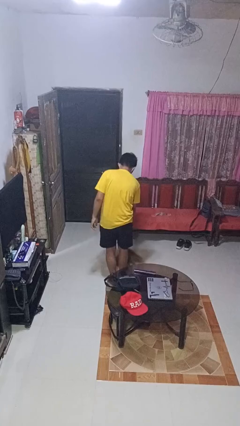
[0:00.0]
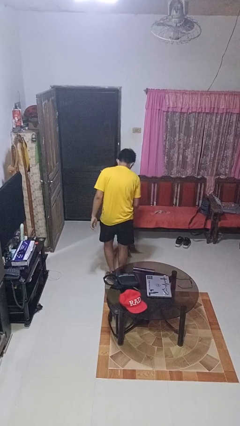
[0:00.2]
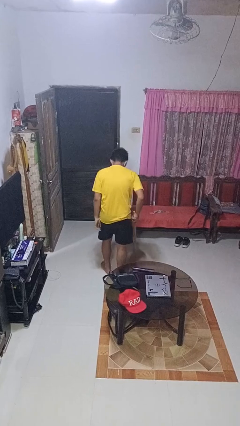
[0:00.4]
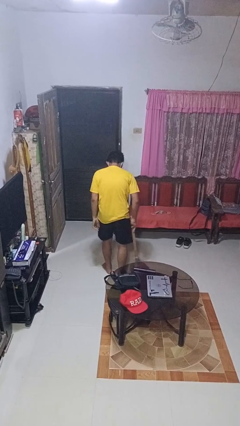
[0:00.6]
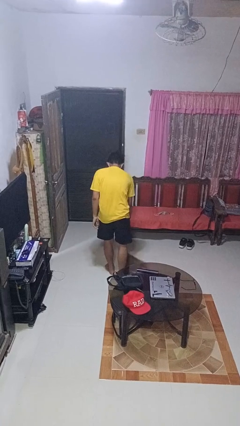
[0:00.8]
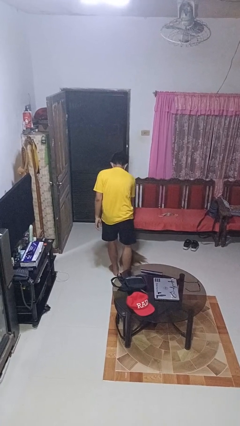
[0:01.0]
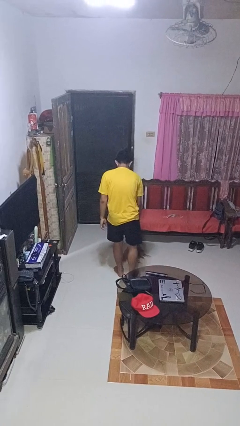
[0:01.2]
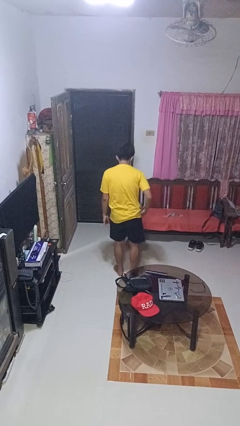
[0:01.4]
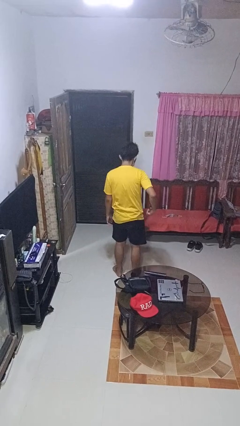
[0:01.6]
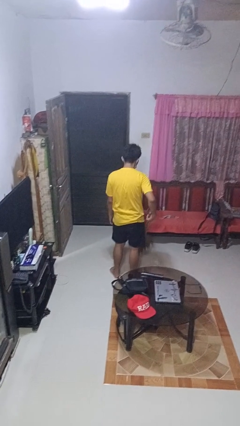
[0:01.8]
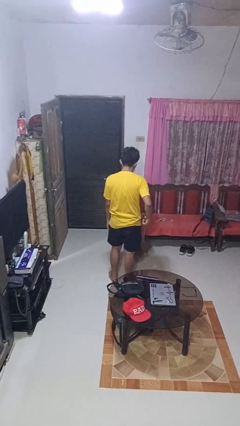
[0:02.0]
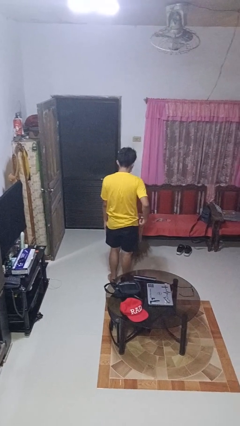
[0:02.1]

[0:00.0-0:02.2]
person sweeps floor

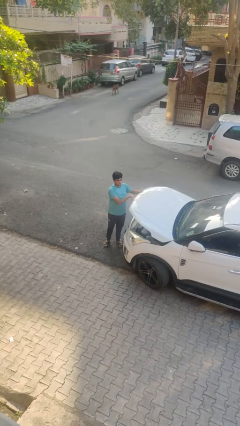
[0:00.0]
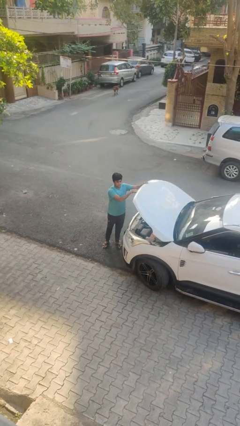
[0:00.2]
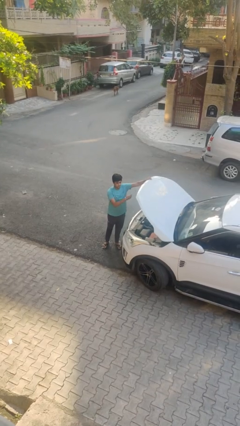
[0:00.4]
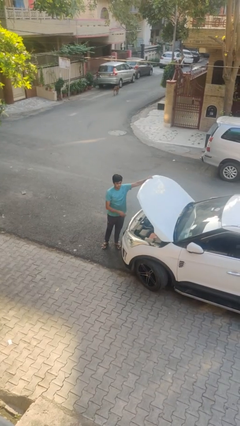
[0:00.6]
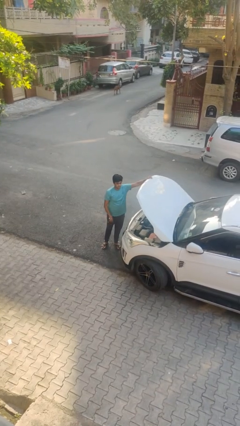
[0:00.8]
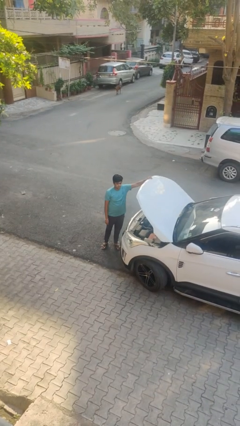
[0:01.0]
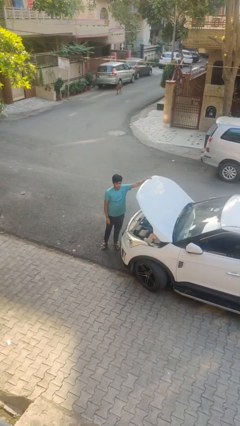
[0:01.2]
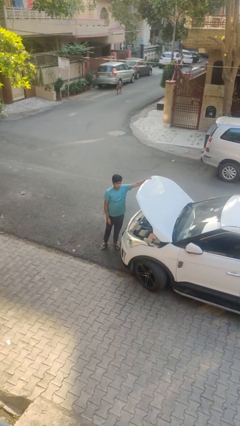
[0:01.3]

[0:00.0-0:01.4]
person opens car hood

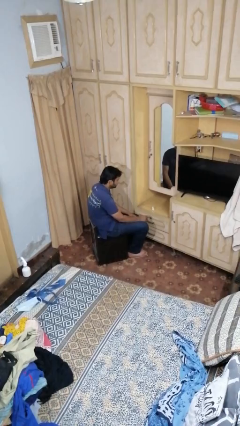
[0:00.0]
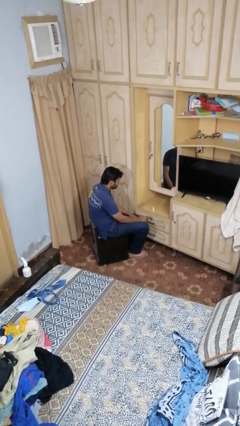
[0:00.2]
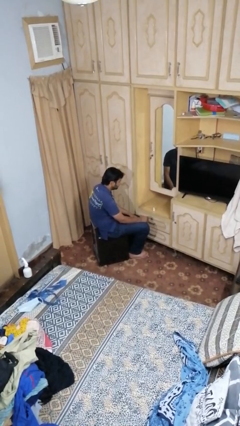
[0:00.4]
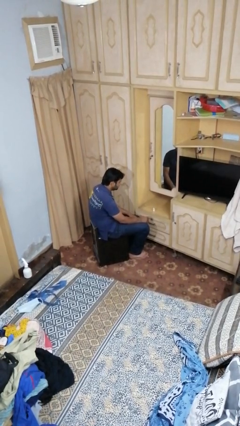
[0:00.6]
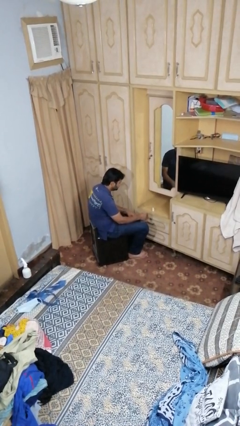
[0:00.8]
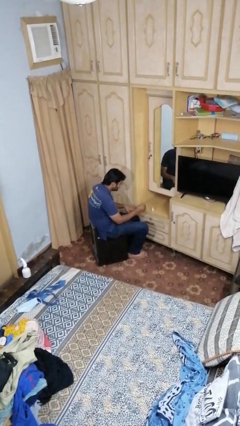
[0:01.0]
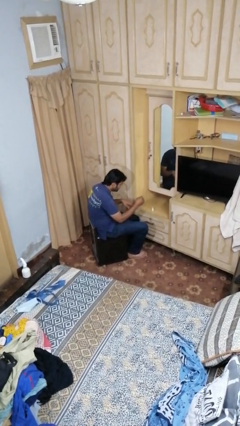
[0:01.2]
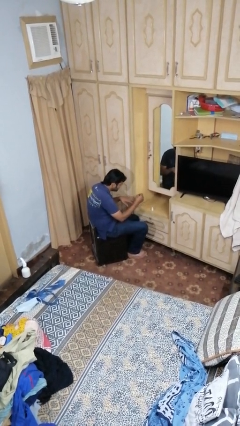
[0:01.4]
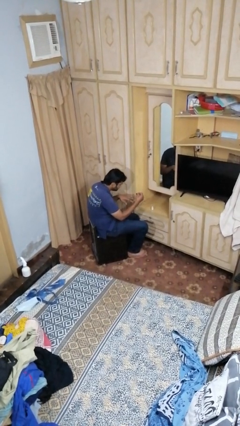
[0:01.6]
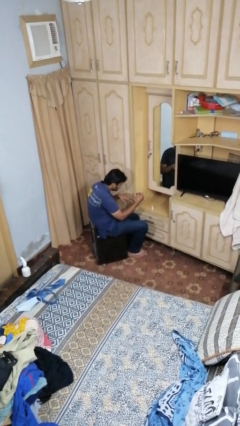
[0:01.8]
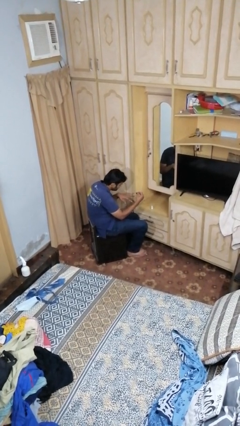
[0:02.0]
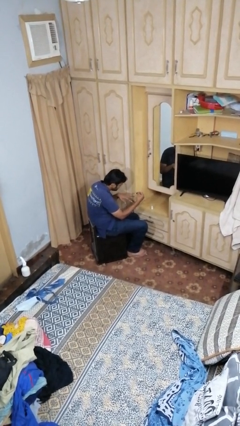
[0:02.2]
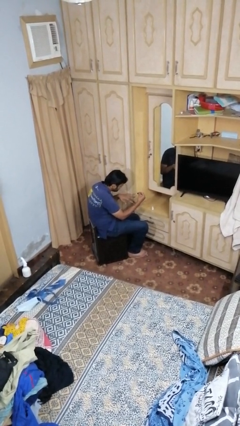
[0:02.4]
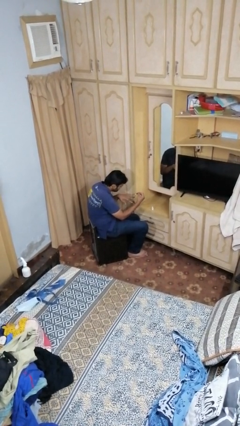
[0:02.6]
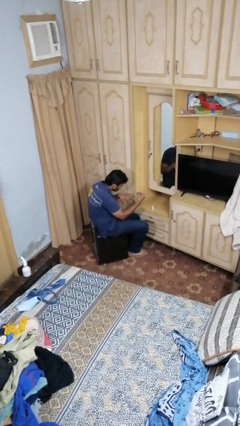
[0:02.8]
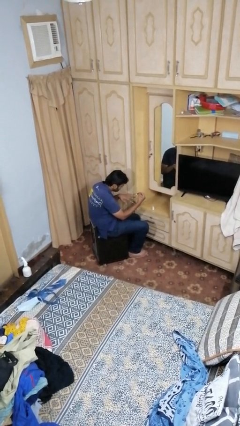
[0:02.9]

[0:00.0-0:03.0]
person paints fingernails

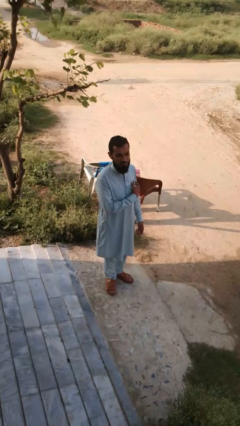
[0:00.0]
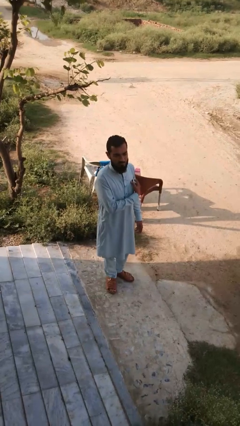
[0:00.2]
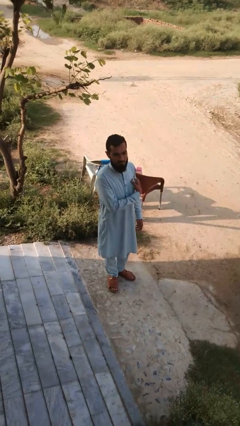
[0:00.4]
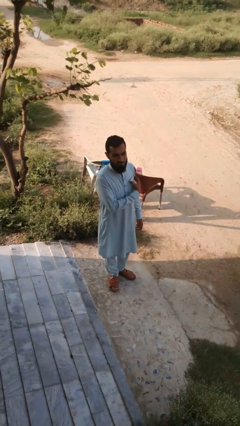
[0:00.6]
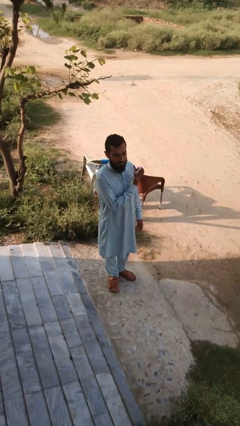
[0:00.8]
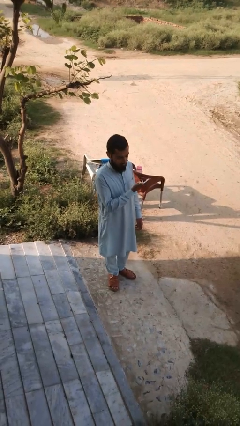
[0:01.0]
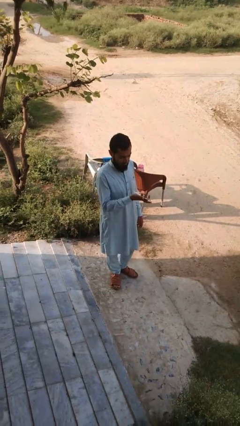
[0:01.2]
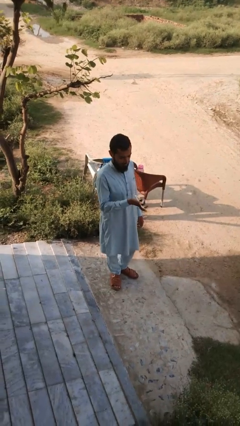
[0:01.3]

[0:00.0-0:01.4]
person takes phone from pocket

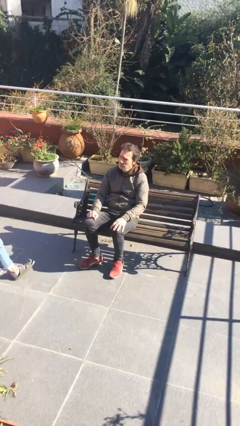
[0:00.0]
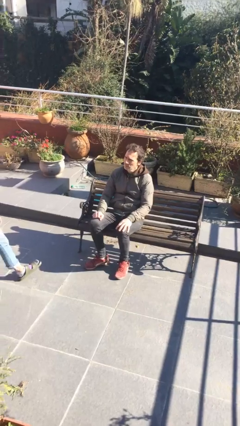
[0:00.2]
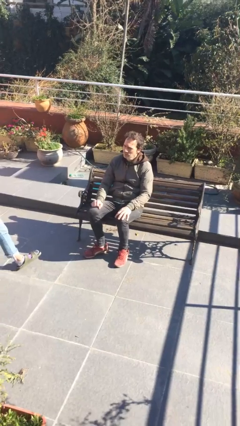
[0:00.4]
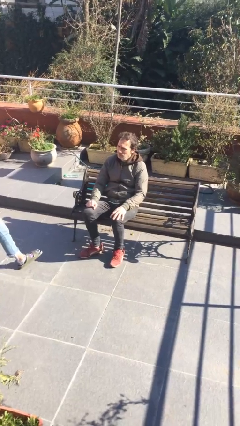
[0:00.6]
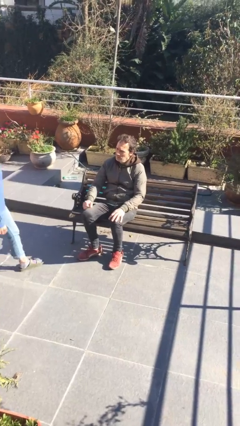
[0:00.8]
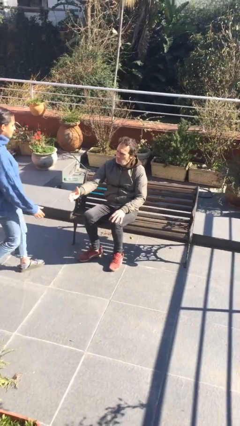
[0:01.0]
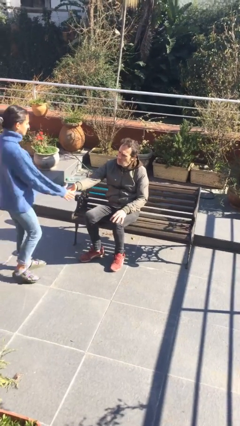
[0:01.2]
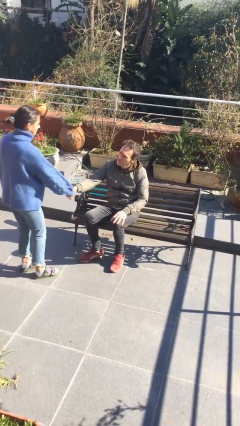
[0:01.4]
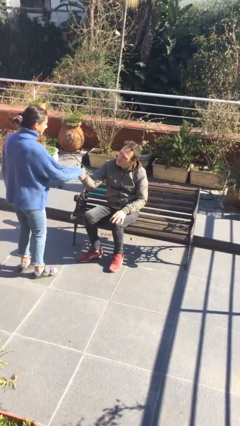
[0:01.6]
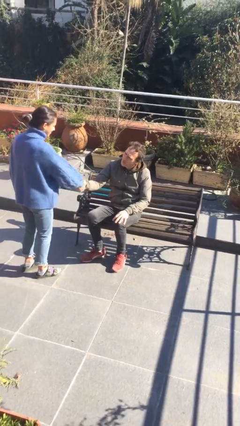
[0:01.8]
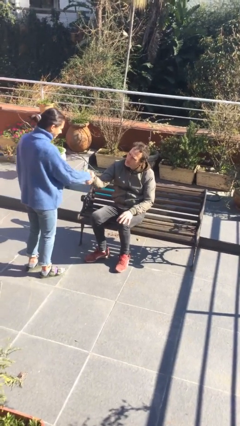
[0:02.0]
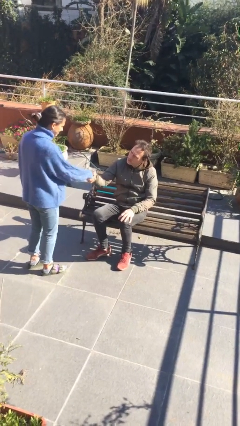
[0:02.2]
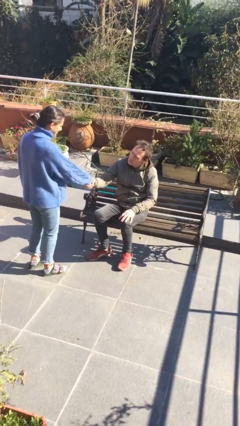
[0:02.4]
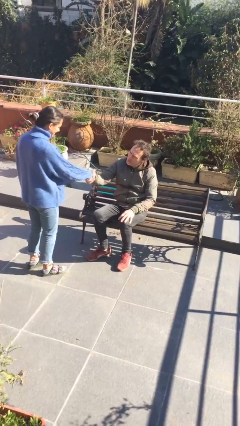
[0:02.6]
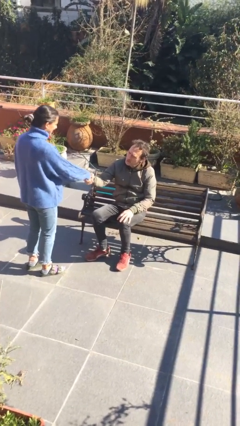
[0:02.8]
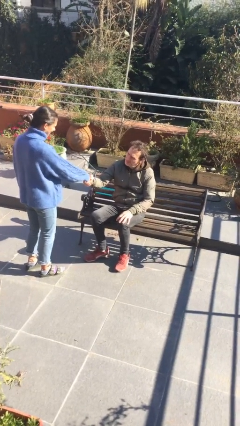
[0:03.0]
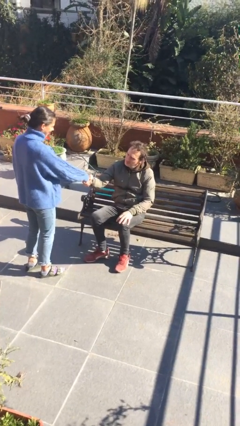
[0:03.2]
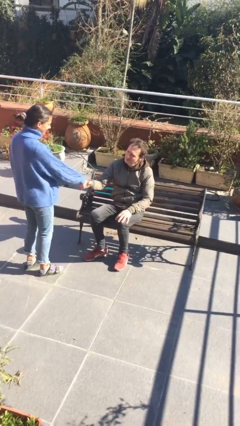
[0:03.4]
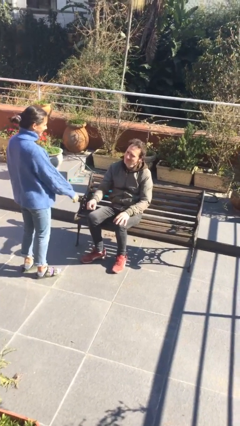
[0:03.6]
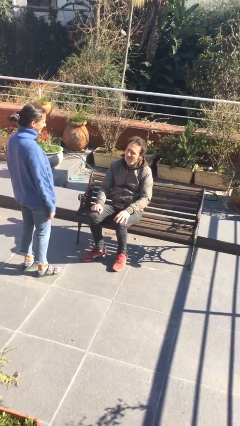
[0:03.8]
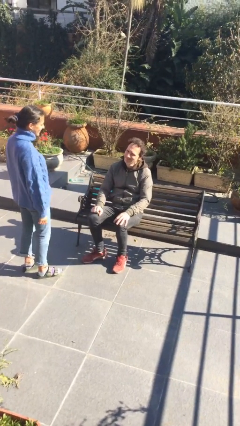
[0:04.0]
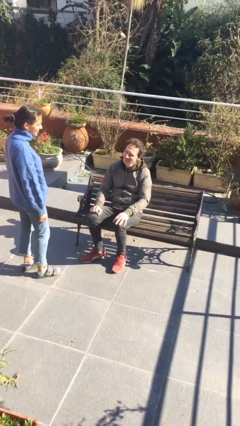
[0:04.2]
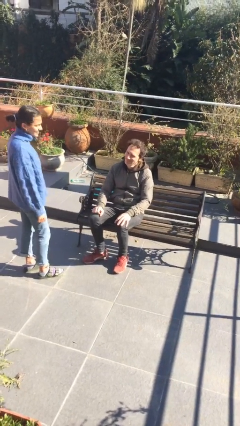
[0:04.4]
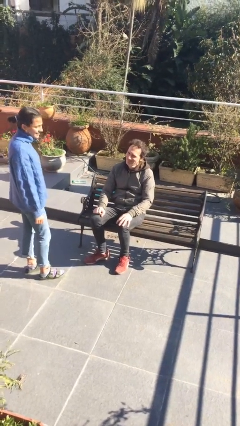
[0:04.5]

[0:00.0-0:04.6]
person shakes hand

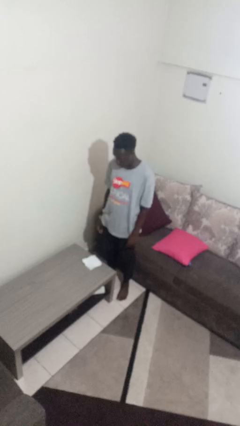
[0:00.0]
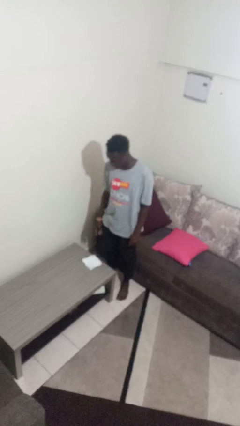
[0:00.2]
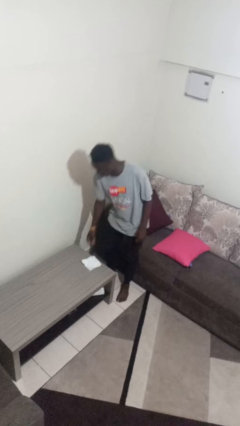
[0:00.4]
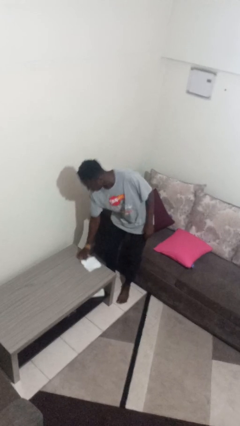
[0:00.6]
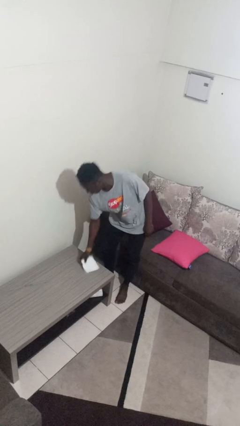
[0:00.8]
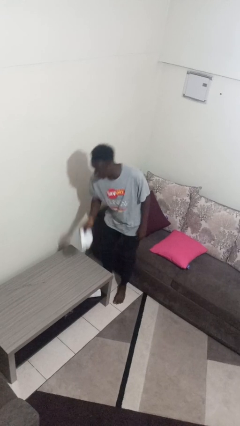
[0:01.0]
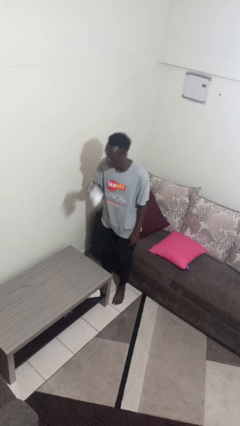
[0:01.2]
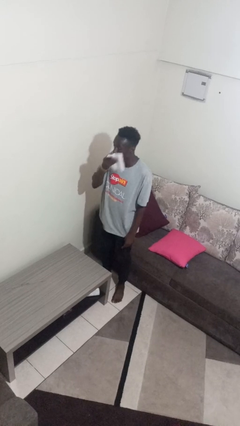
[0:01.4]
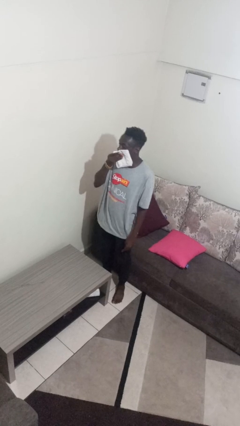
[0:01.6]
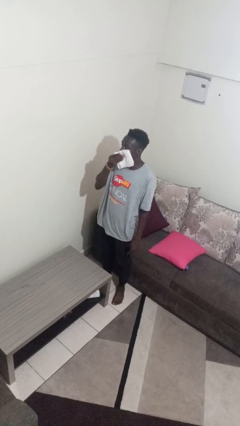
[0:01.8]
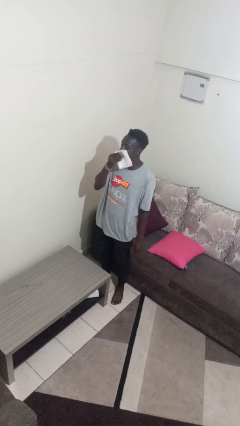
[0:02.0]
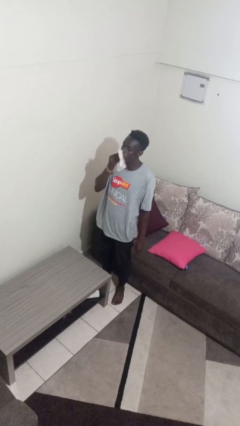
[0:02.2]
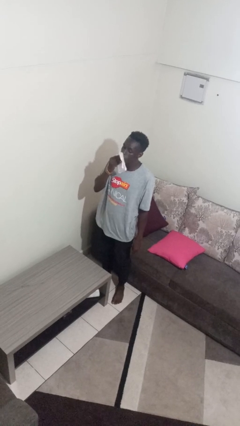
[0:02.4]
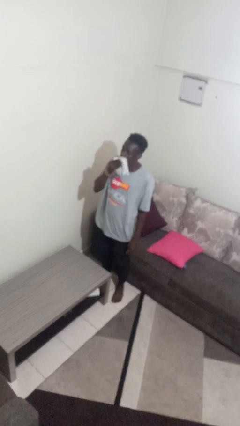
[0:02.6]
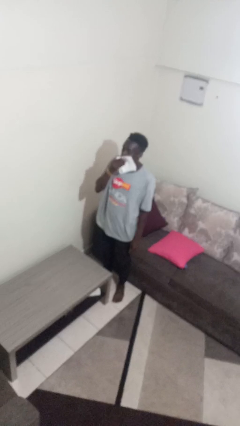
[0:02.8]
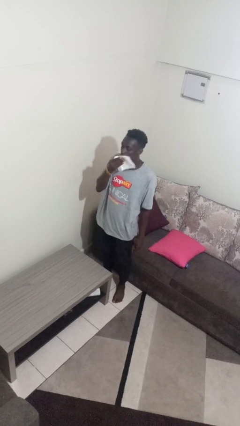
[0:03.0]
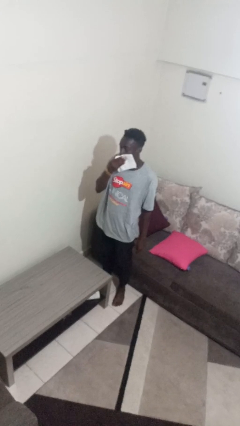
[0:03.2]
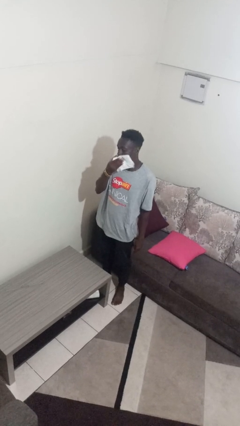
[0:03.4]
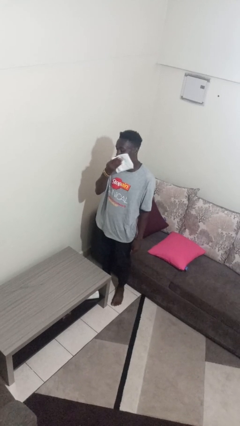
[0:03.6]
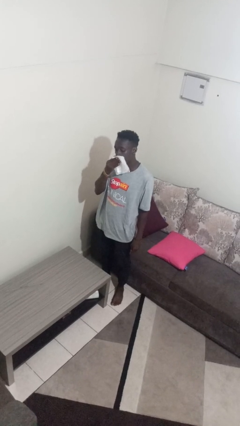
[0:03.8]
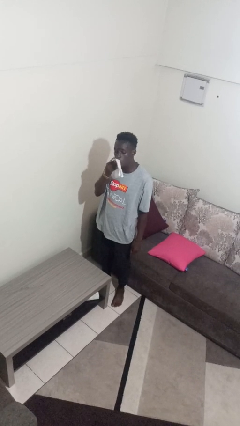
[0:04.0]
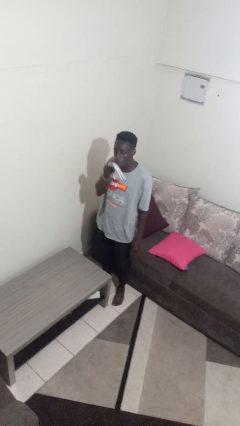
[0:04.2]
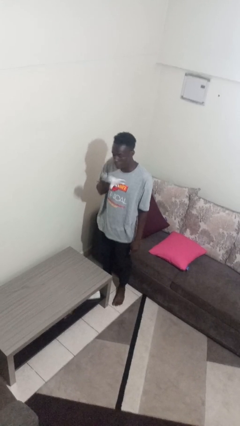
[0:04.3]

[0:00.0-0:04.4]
person wipes mouth with napkin
